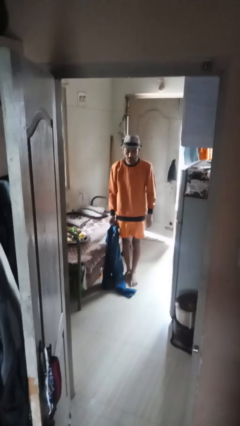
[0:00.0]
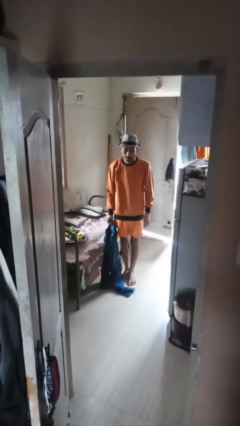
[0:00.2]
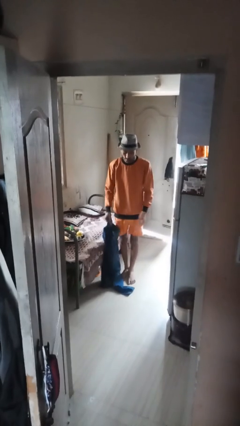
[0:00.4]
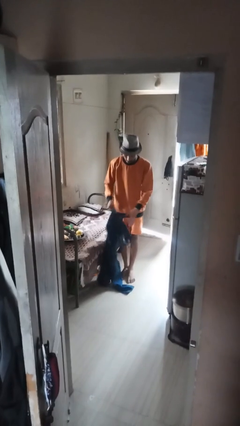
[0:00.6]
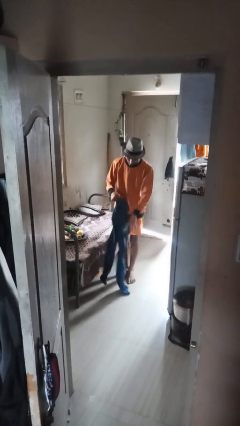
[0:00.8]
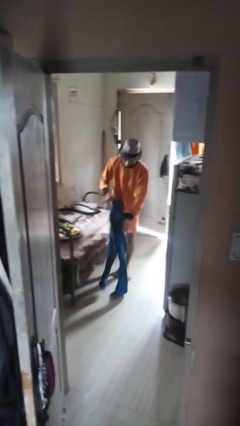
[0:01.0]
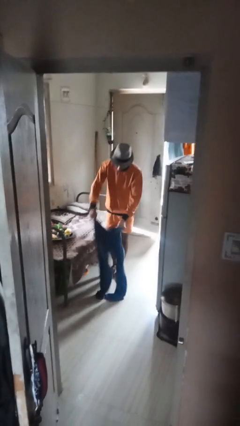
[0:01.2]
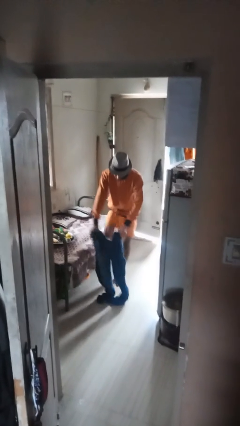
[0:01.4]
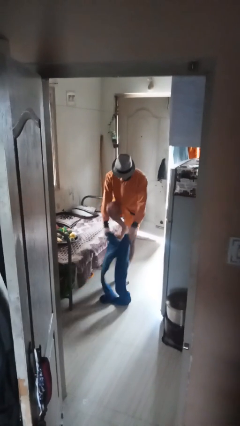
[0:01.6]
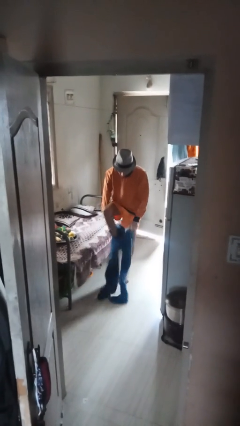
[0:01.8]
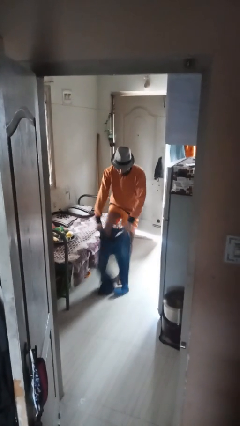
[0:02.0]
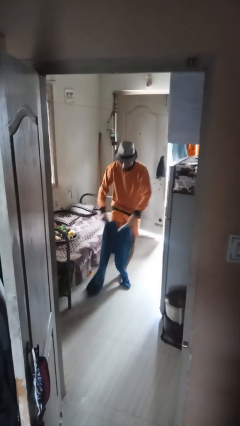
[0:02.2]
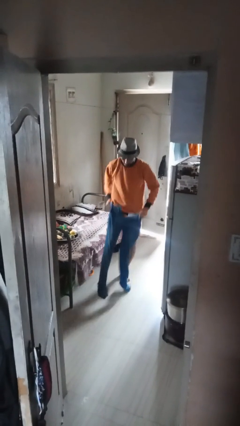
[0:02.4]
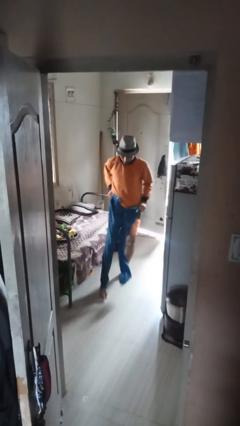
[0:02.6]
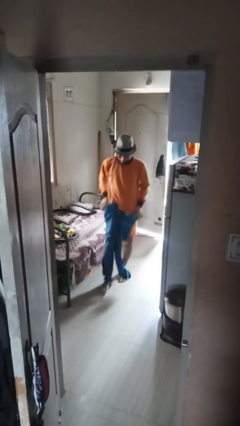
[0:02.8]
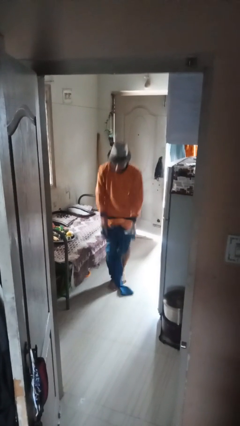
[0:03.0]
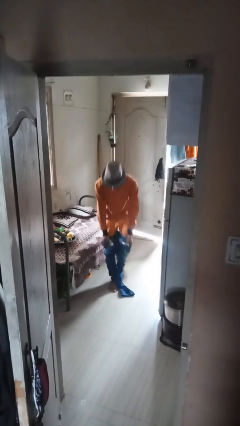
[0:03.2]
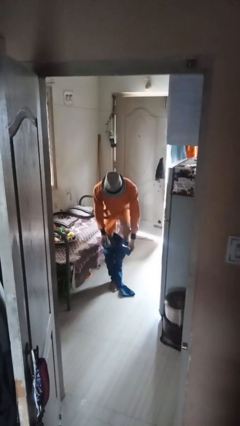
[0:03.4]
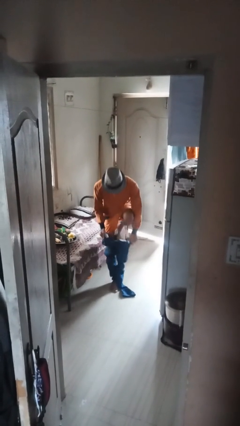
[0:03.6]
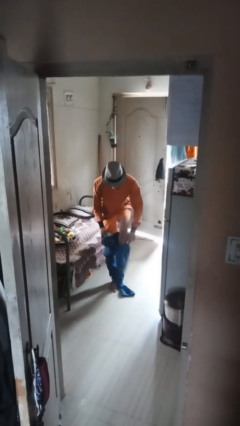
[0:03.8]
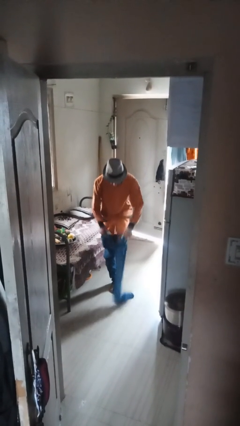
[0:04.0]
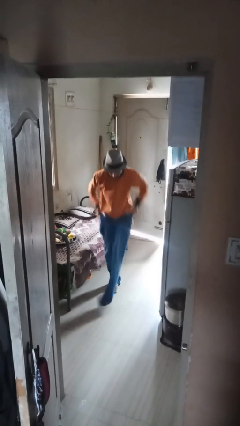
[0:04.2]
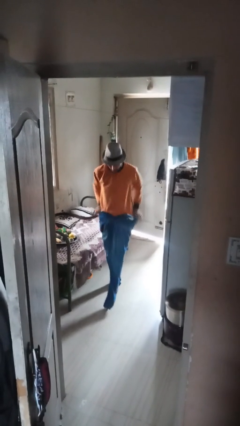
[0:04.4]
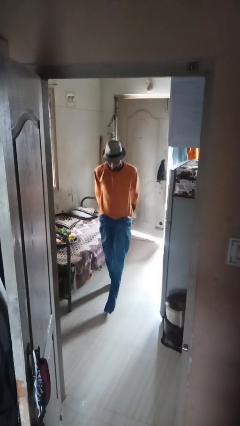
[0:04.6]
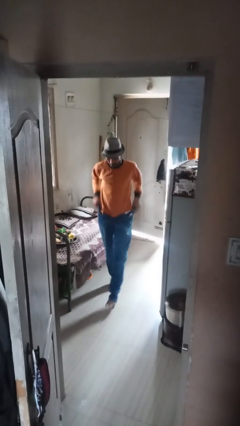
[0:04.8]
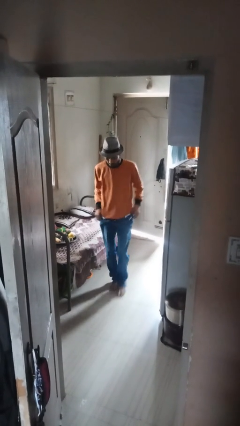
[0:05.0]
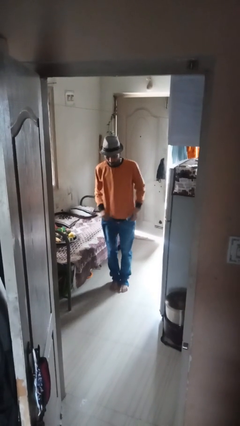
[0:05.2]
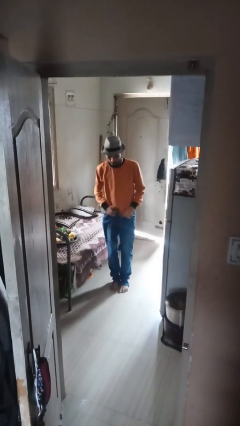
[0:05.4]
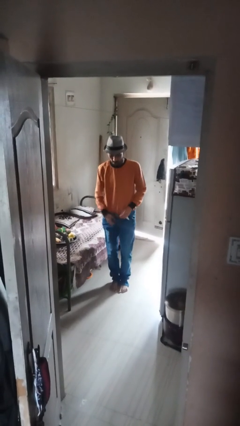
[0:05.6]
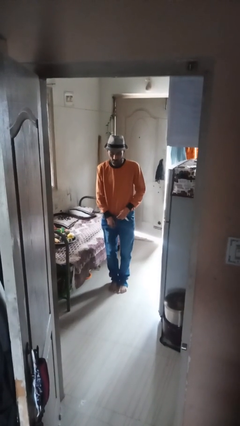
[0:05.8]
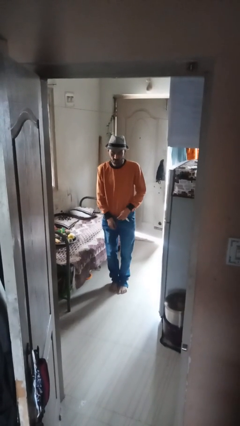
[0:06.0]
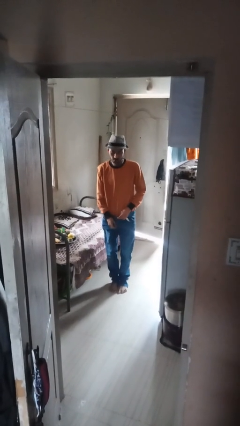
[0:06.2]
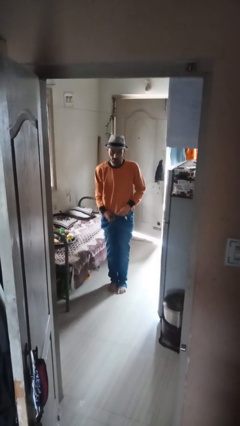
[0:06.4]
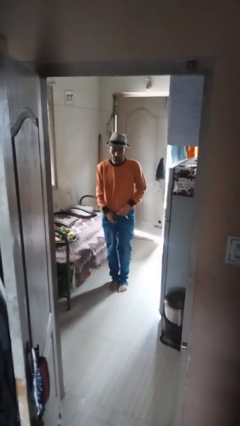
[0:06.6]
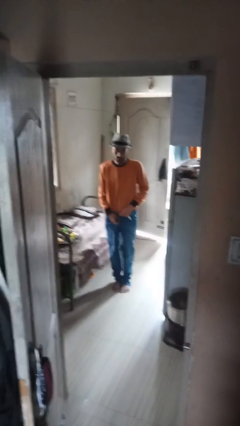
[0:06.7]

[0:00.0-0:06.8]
person puts on pants

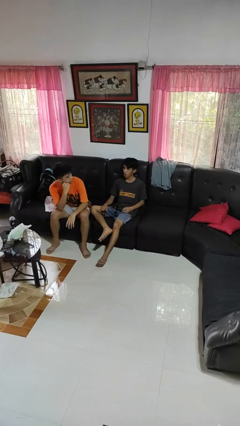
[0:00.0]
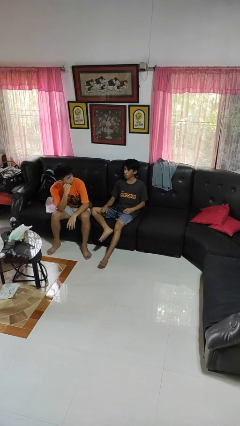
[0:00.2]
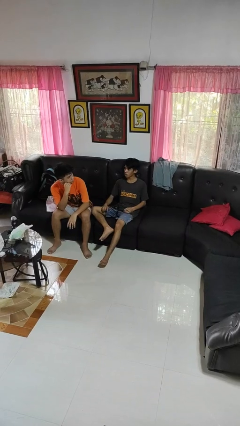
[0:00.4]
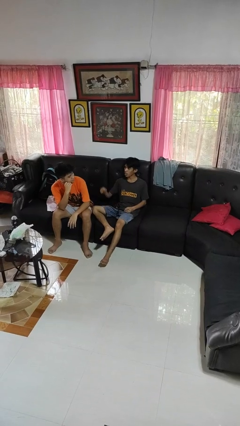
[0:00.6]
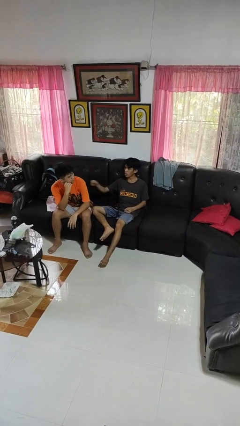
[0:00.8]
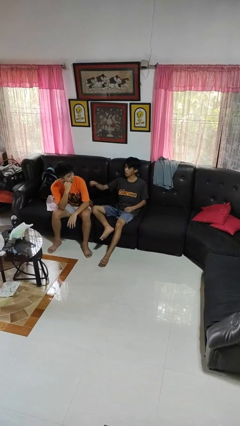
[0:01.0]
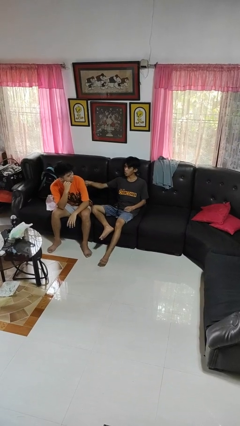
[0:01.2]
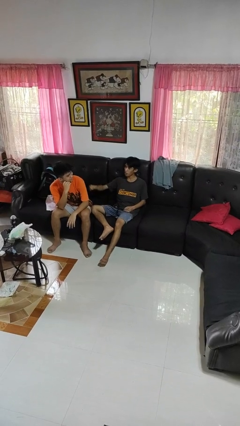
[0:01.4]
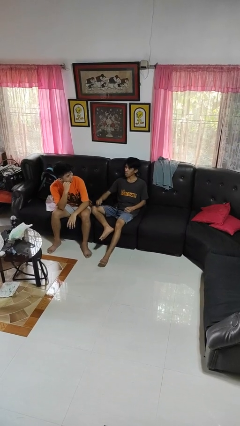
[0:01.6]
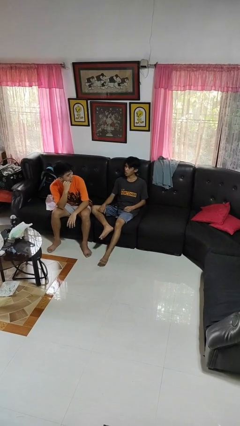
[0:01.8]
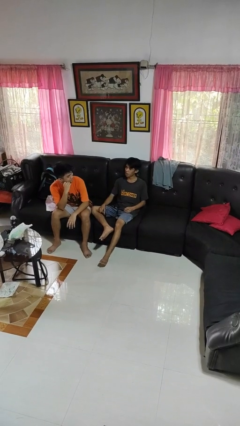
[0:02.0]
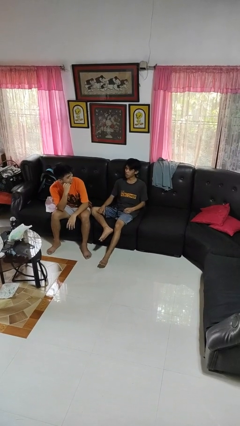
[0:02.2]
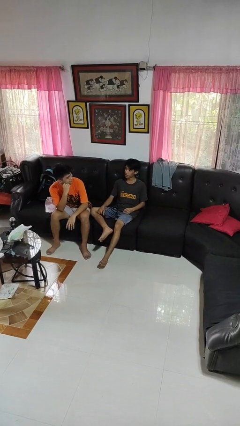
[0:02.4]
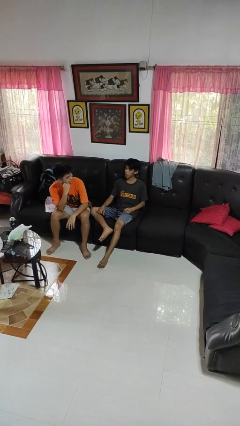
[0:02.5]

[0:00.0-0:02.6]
person pounds shoulders of person

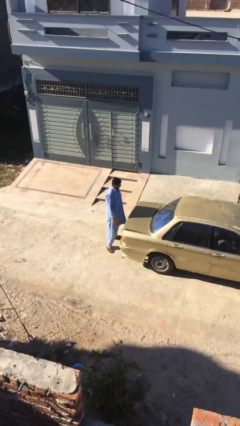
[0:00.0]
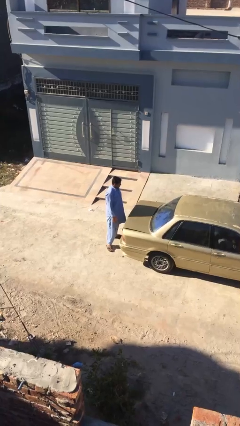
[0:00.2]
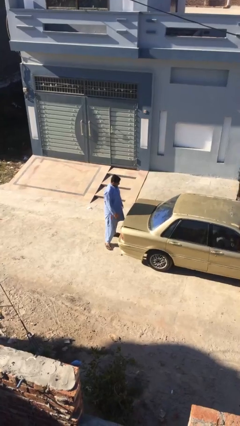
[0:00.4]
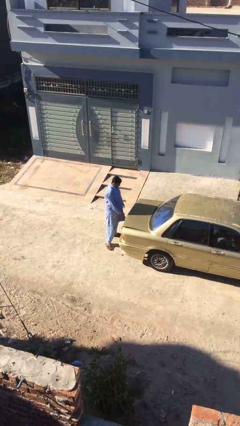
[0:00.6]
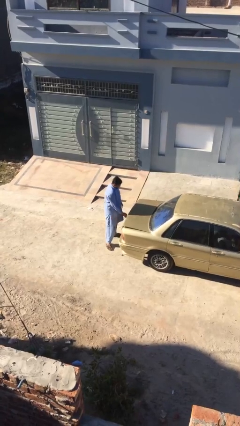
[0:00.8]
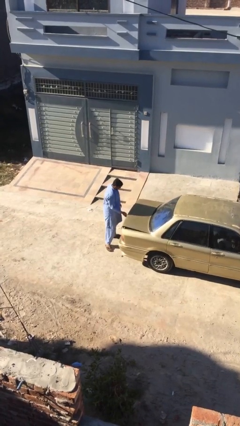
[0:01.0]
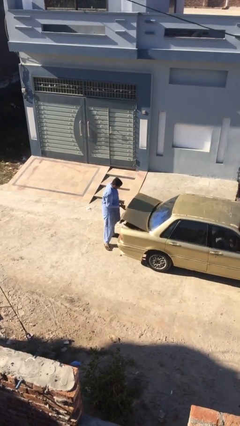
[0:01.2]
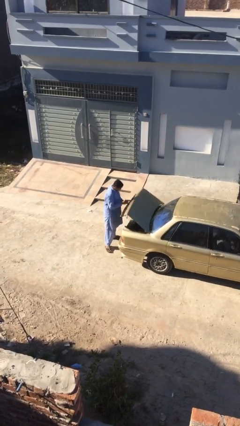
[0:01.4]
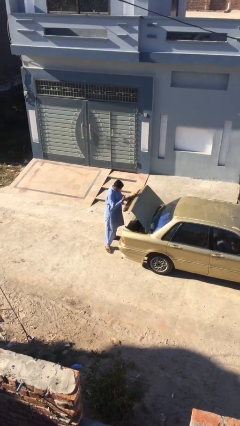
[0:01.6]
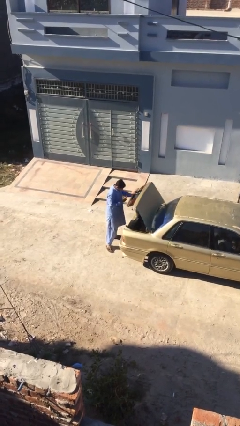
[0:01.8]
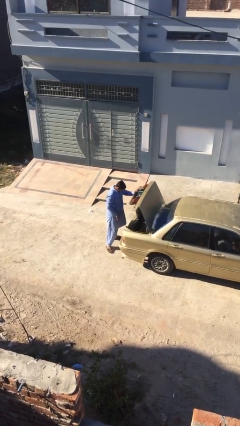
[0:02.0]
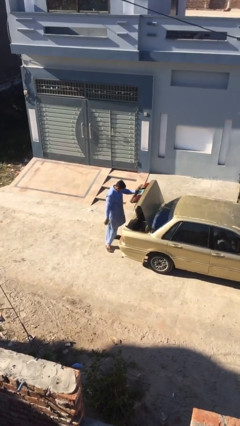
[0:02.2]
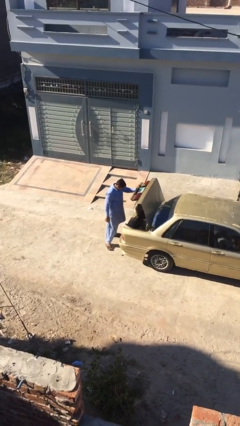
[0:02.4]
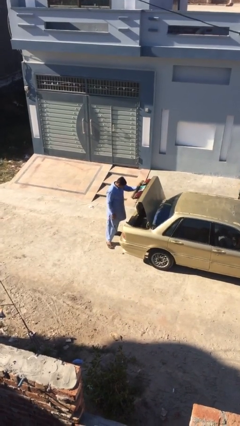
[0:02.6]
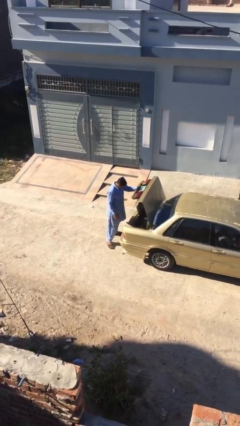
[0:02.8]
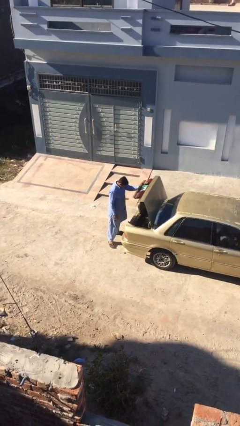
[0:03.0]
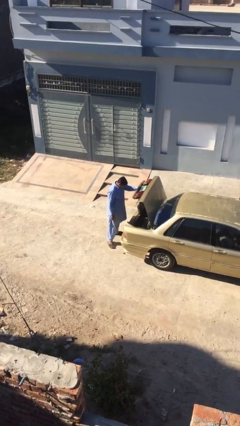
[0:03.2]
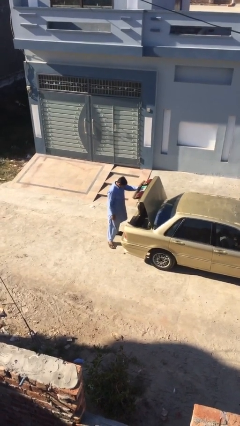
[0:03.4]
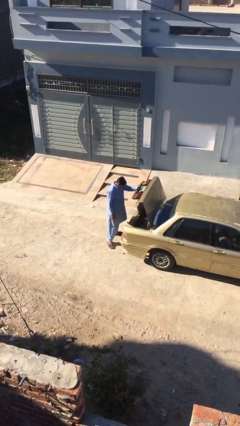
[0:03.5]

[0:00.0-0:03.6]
person opens car trunk

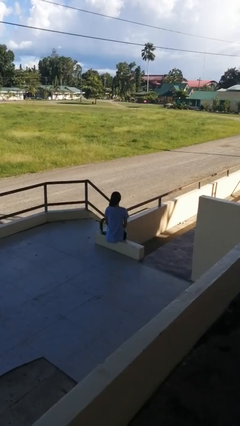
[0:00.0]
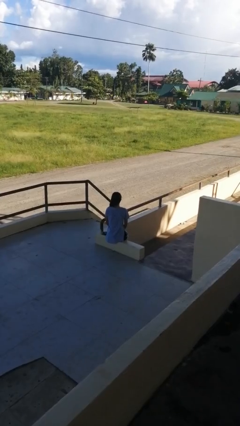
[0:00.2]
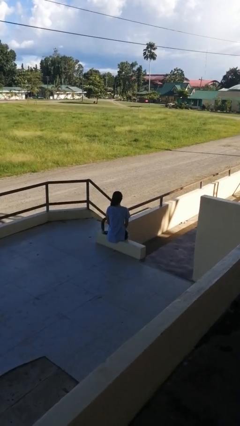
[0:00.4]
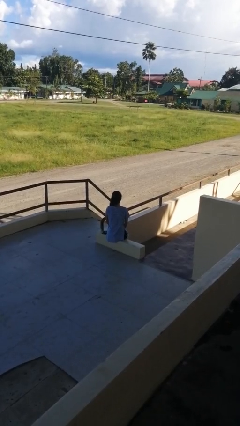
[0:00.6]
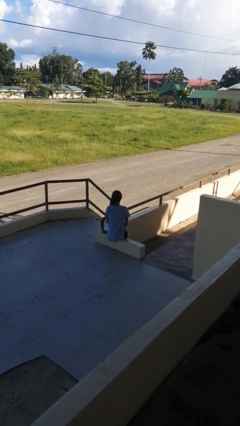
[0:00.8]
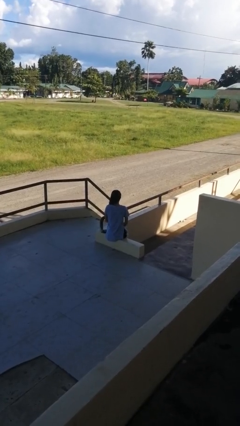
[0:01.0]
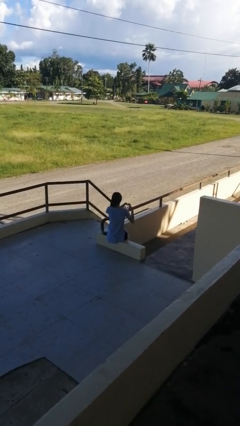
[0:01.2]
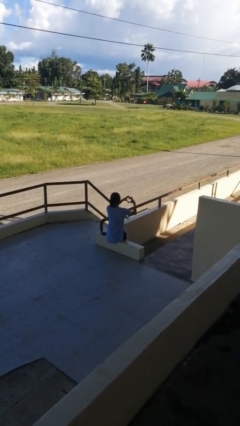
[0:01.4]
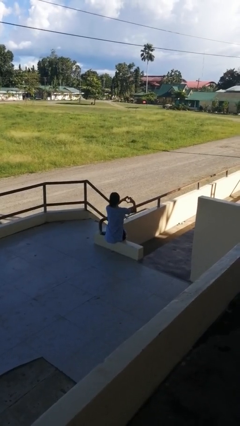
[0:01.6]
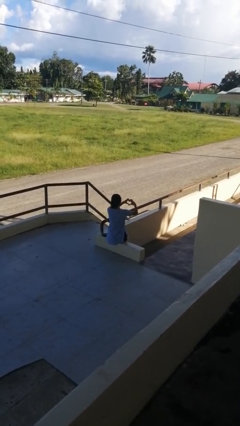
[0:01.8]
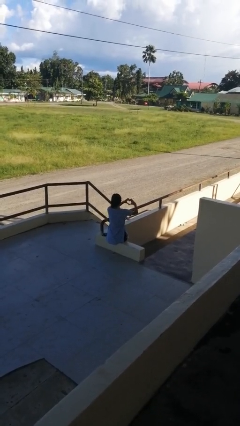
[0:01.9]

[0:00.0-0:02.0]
person gestures heart

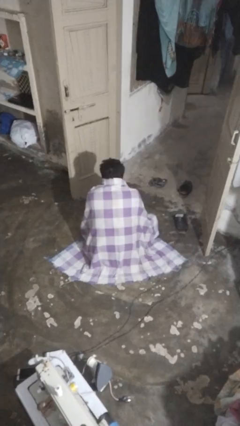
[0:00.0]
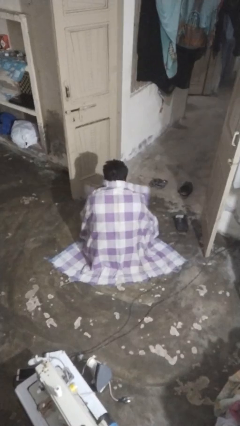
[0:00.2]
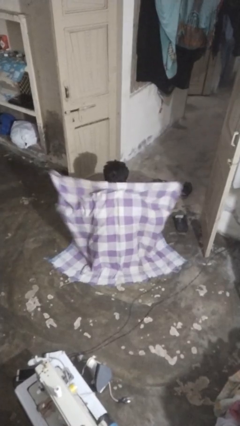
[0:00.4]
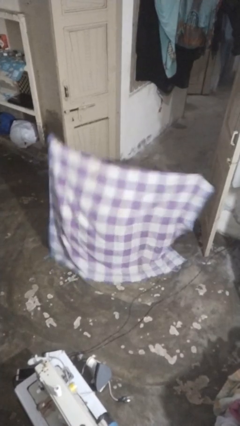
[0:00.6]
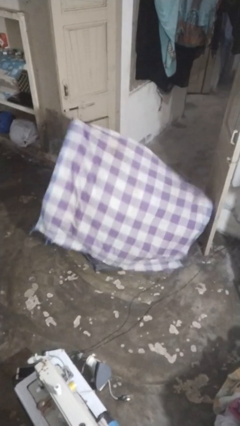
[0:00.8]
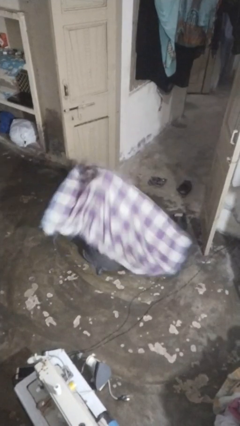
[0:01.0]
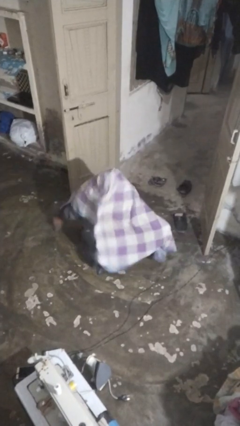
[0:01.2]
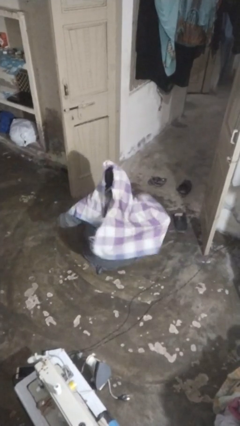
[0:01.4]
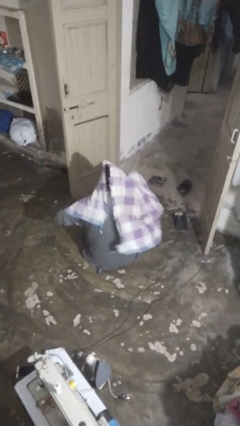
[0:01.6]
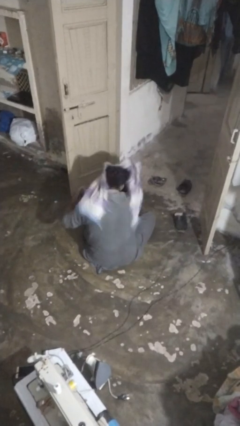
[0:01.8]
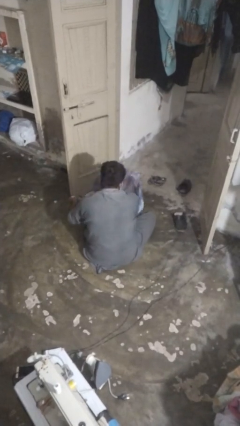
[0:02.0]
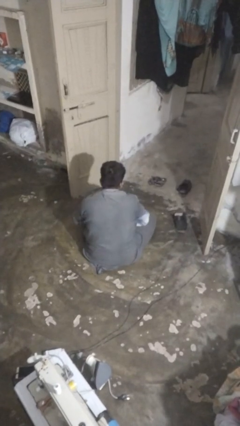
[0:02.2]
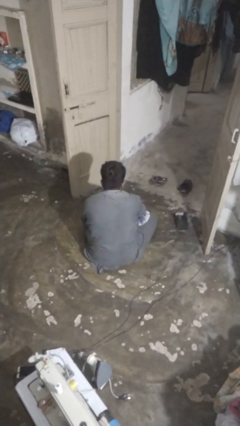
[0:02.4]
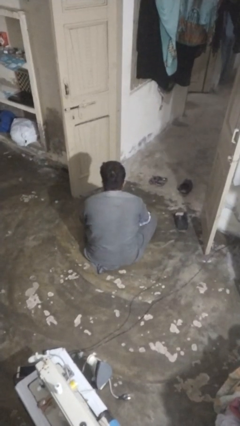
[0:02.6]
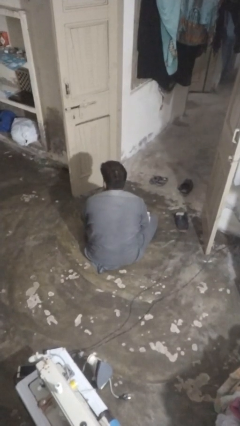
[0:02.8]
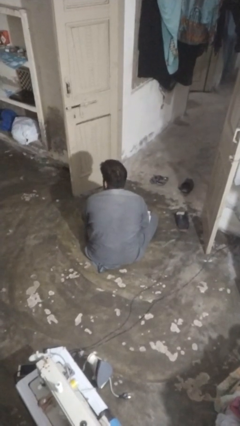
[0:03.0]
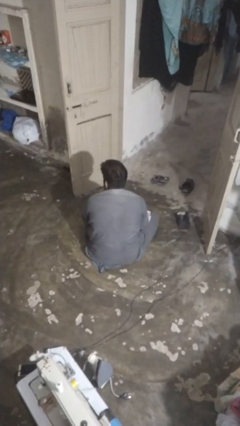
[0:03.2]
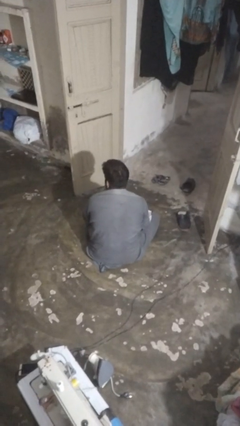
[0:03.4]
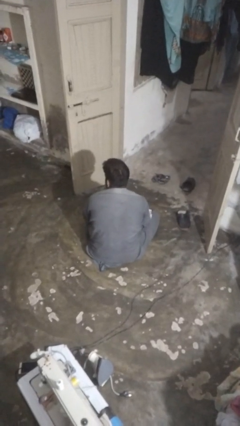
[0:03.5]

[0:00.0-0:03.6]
person uncovers with blanket
